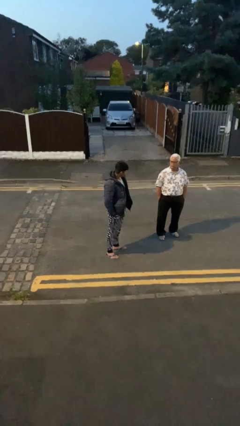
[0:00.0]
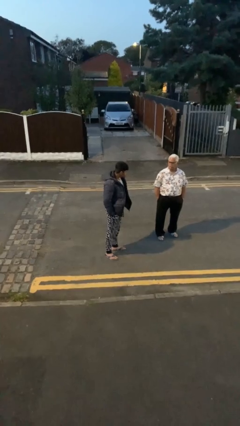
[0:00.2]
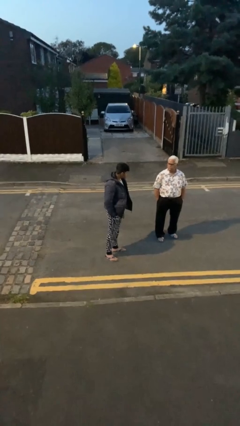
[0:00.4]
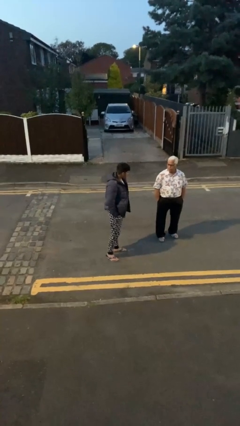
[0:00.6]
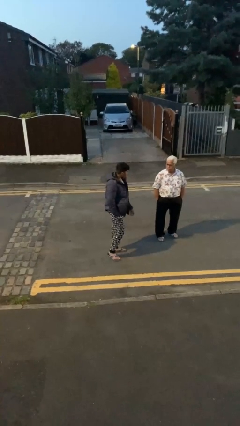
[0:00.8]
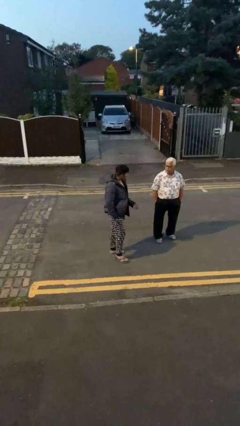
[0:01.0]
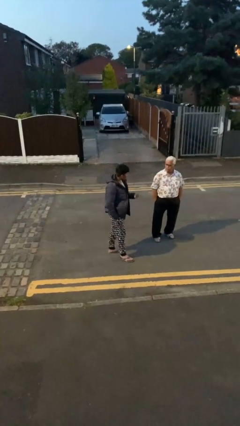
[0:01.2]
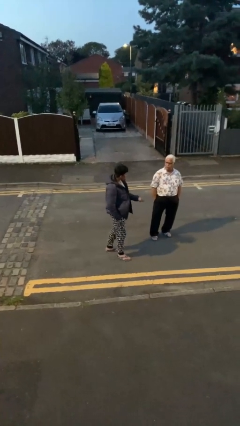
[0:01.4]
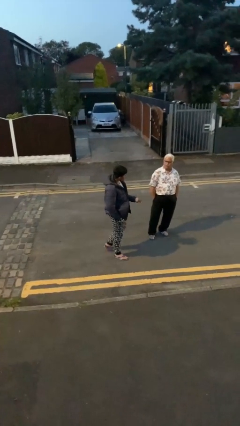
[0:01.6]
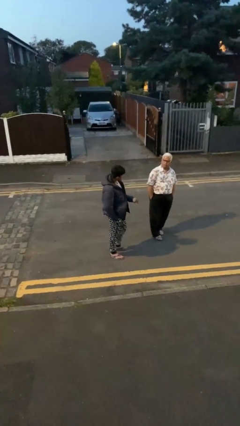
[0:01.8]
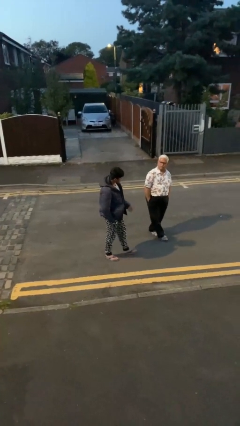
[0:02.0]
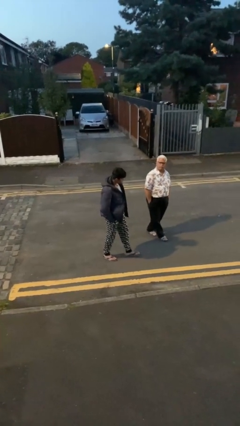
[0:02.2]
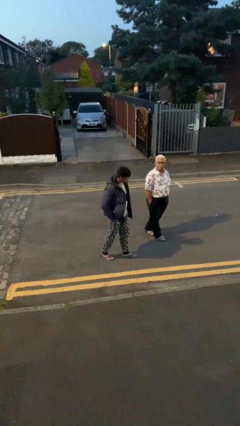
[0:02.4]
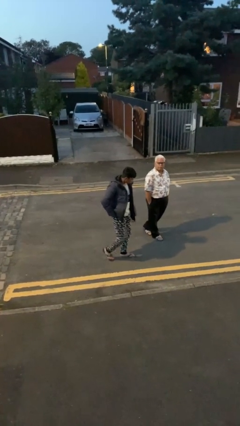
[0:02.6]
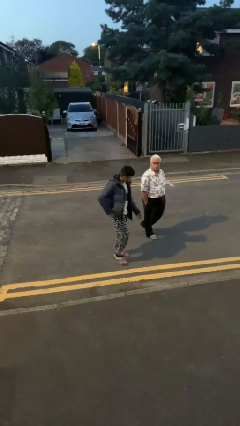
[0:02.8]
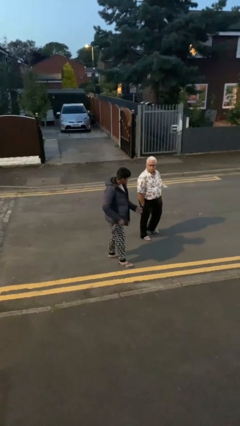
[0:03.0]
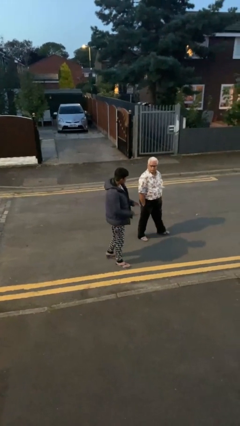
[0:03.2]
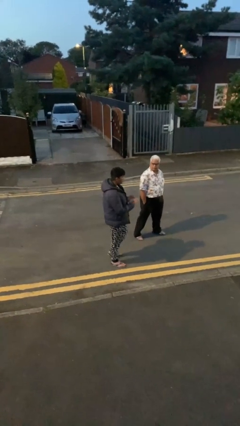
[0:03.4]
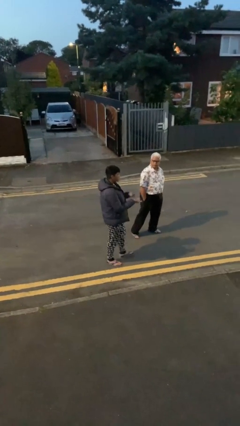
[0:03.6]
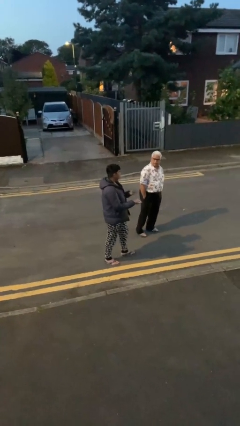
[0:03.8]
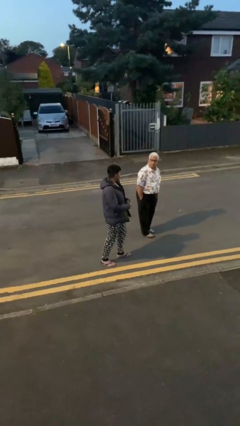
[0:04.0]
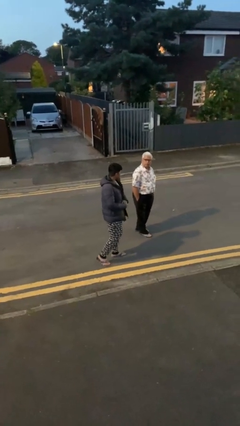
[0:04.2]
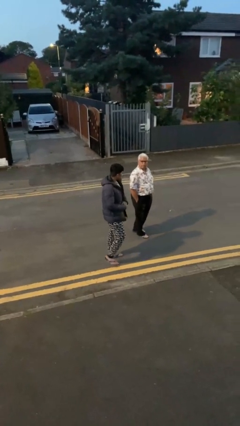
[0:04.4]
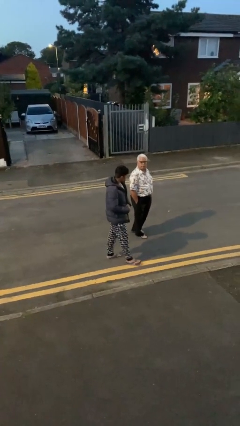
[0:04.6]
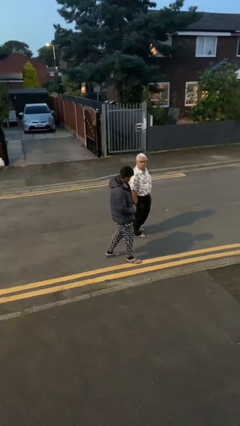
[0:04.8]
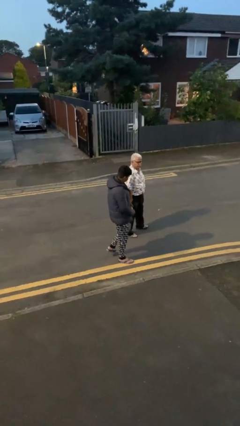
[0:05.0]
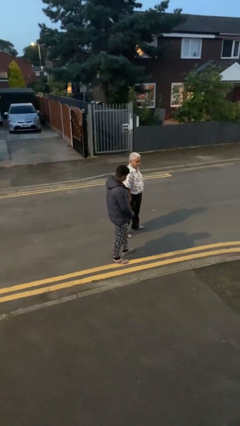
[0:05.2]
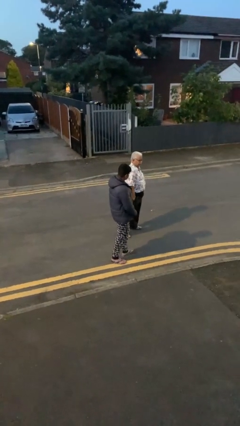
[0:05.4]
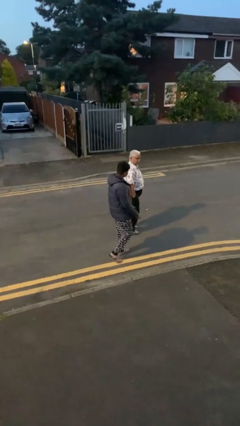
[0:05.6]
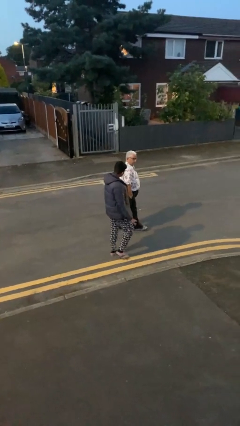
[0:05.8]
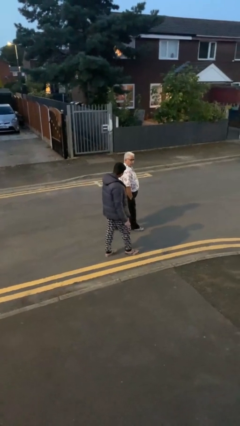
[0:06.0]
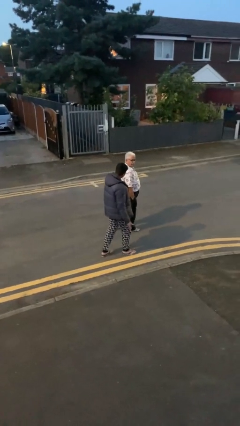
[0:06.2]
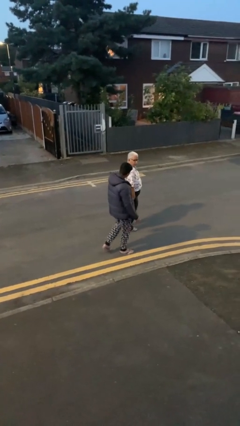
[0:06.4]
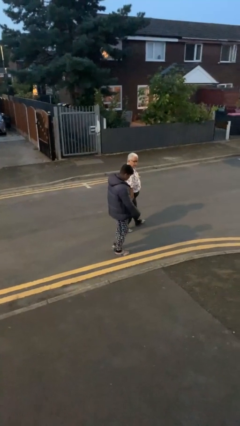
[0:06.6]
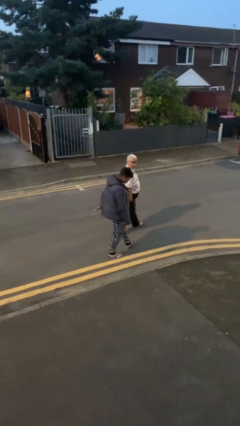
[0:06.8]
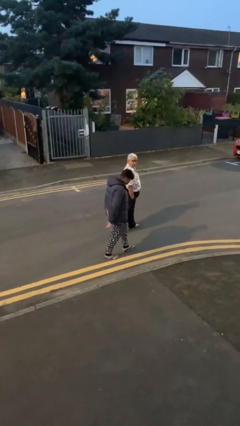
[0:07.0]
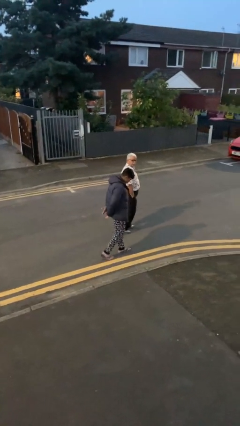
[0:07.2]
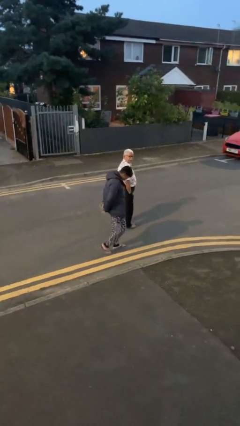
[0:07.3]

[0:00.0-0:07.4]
person talks to person

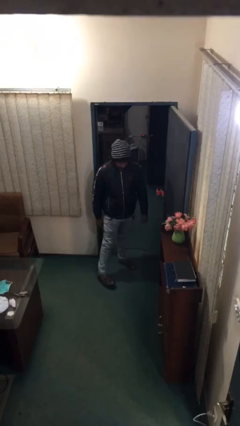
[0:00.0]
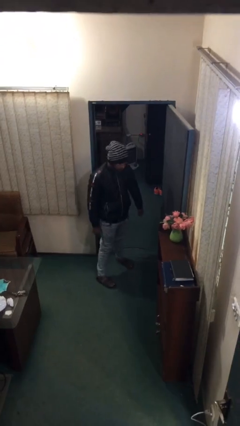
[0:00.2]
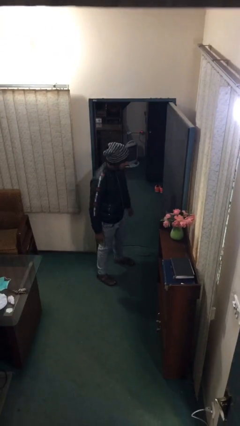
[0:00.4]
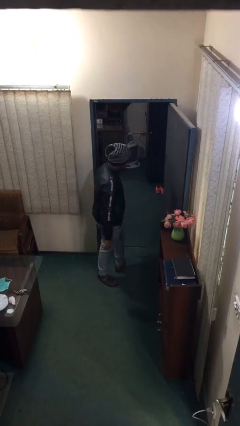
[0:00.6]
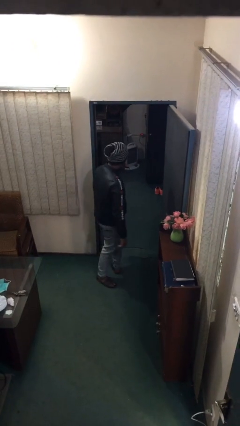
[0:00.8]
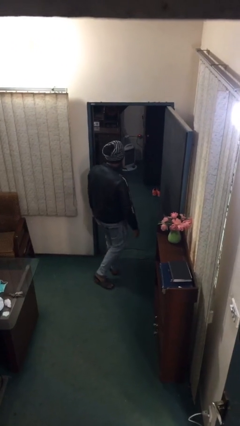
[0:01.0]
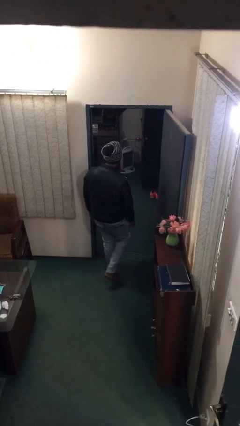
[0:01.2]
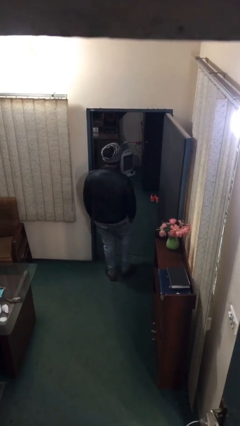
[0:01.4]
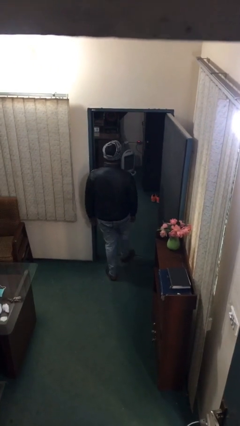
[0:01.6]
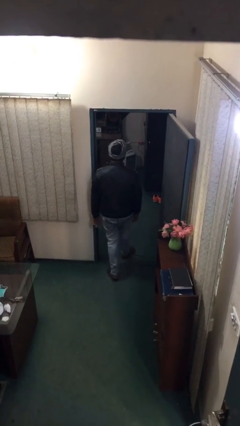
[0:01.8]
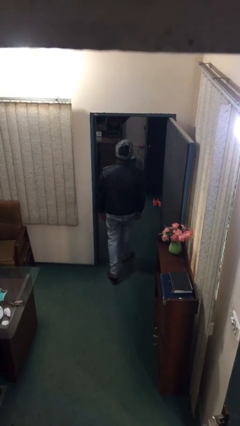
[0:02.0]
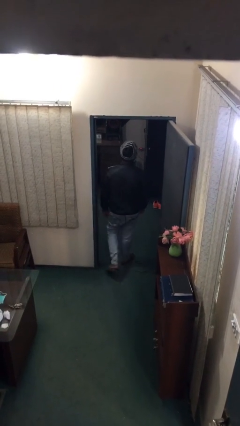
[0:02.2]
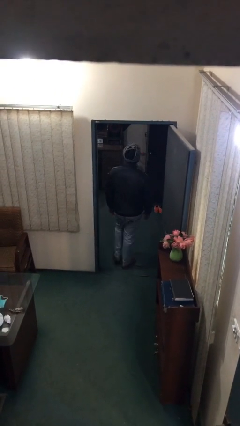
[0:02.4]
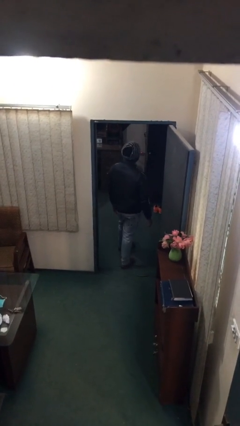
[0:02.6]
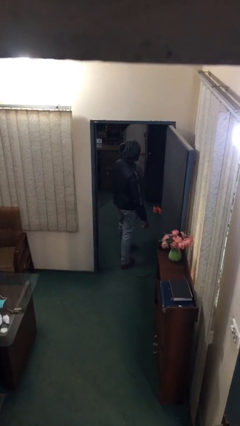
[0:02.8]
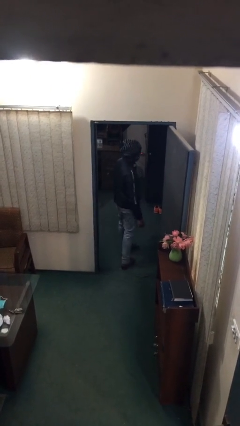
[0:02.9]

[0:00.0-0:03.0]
person exits scene through structure

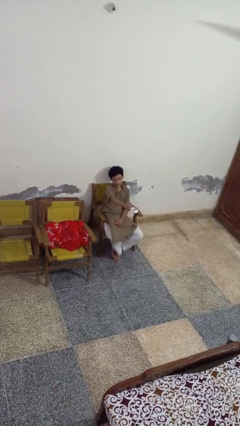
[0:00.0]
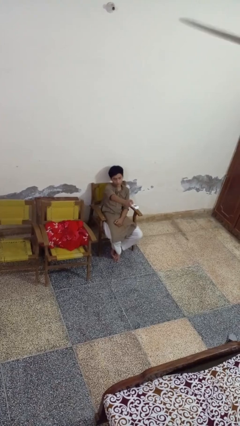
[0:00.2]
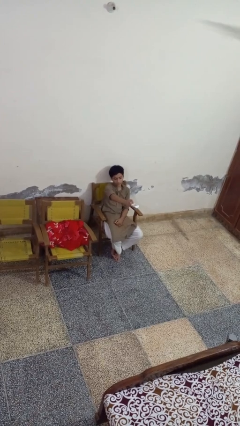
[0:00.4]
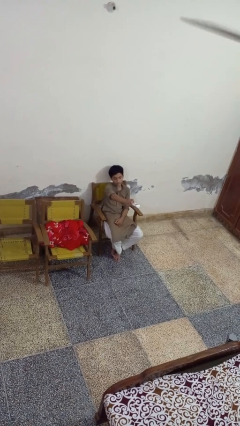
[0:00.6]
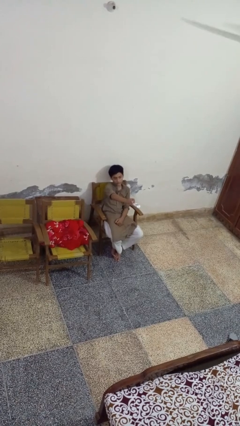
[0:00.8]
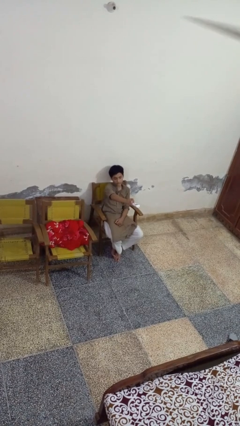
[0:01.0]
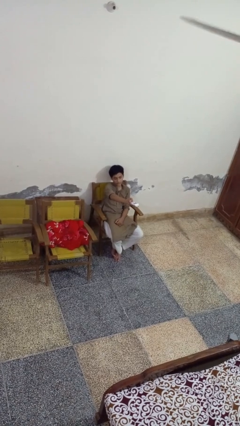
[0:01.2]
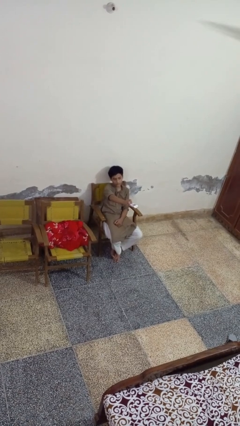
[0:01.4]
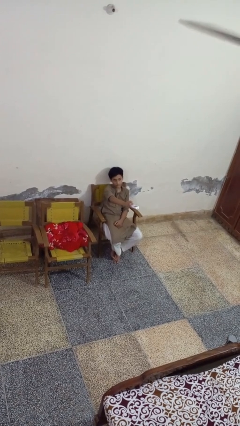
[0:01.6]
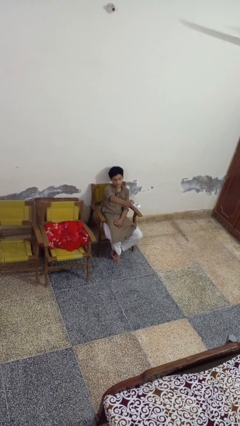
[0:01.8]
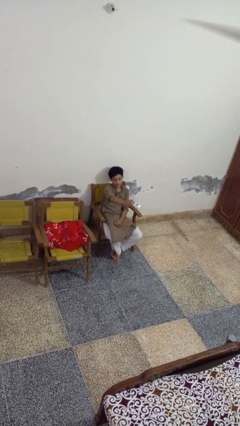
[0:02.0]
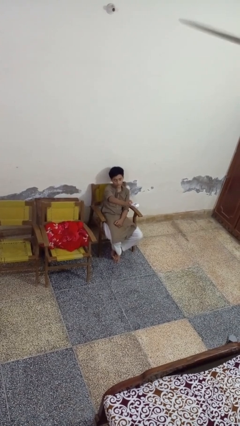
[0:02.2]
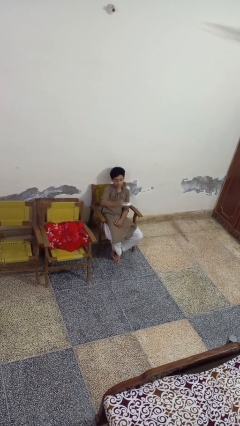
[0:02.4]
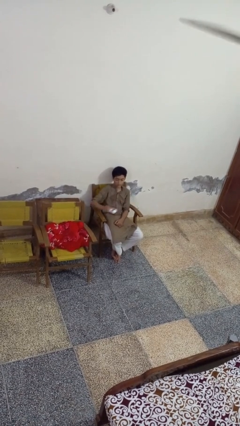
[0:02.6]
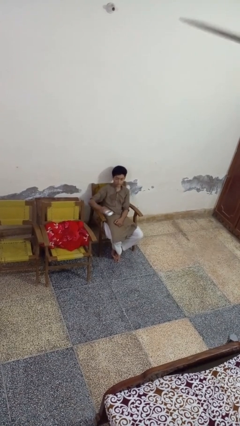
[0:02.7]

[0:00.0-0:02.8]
person uses television remote

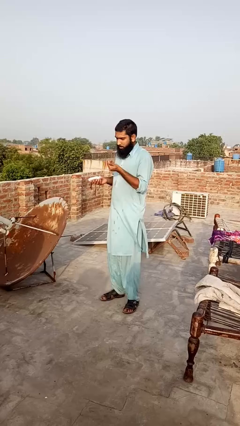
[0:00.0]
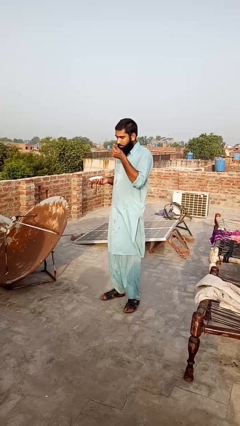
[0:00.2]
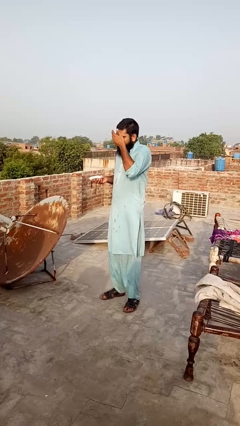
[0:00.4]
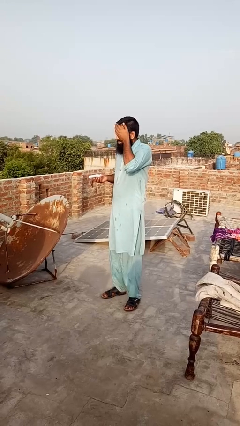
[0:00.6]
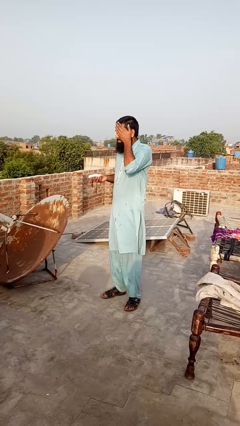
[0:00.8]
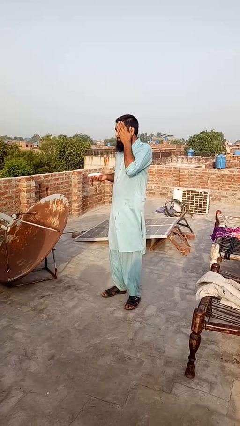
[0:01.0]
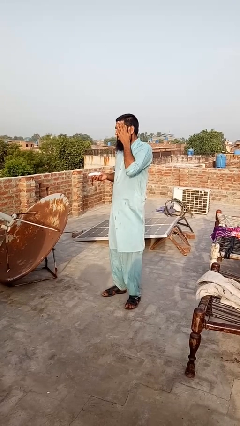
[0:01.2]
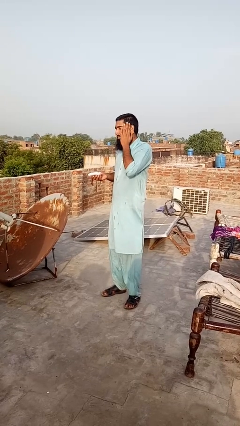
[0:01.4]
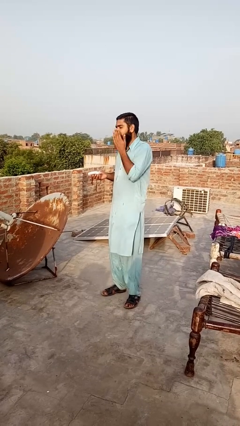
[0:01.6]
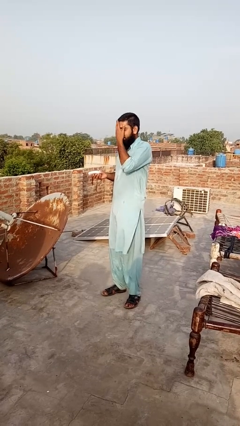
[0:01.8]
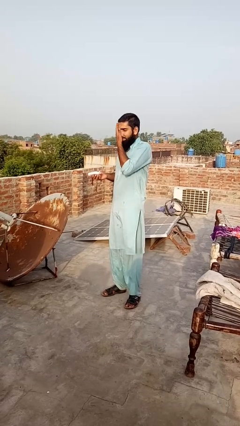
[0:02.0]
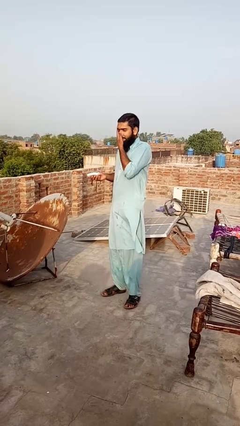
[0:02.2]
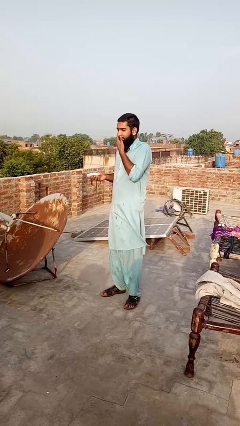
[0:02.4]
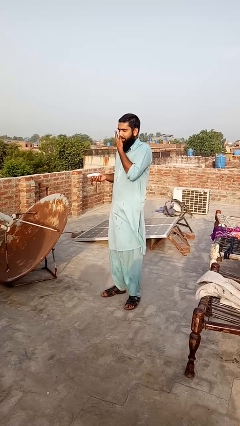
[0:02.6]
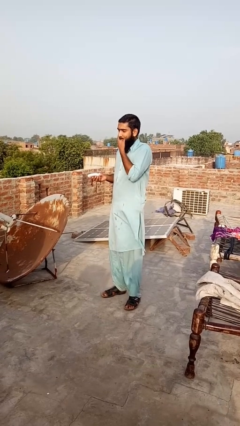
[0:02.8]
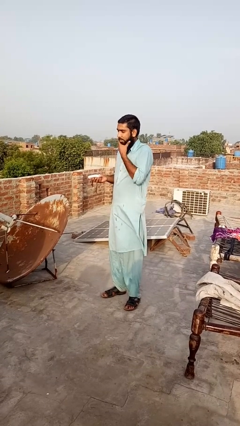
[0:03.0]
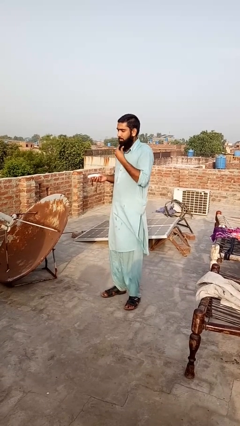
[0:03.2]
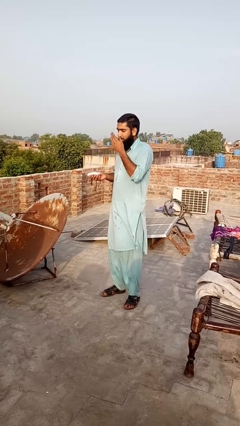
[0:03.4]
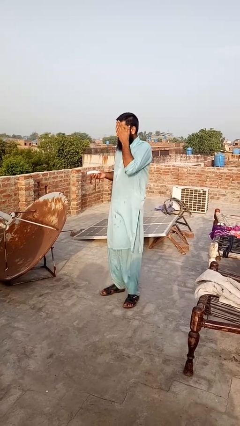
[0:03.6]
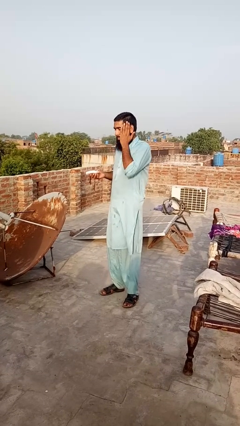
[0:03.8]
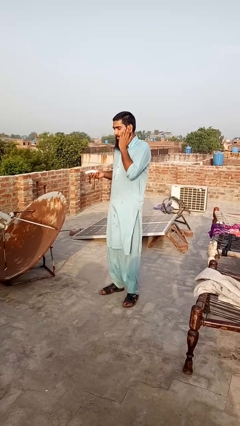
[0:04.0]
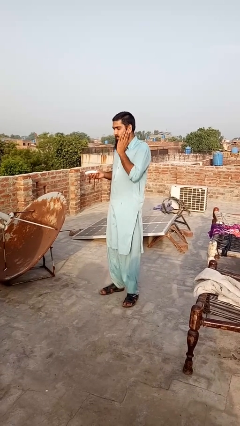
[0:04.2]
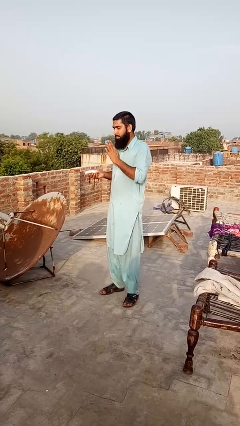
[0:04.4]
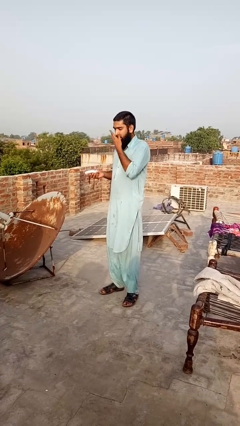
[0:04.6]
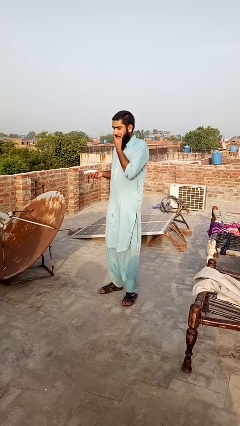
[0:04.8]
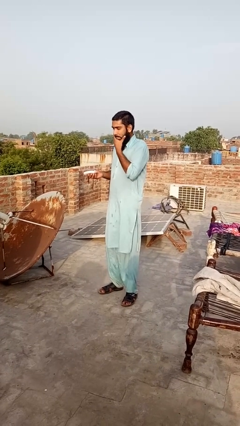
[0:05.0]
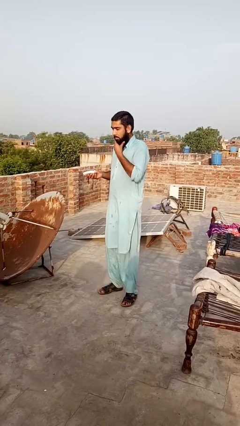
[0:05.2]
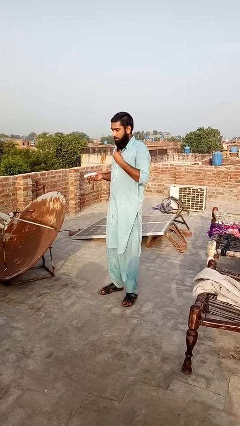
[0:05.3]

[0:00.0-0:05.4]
person applies facial moisturizer
